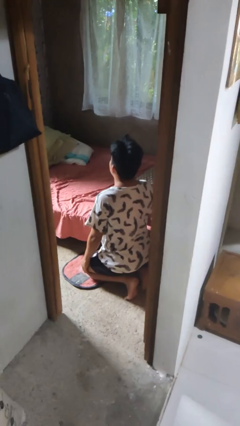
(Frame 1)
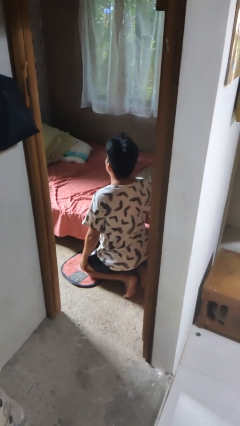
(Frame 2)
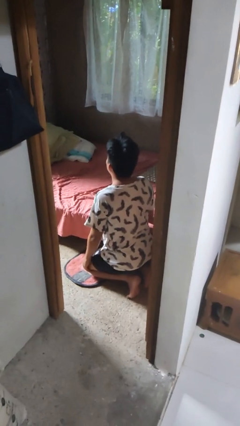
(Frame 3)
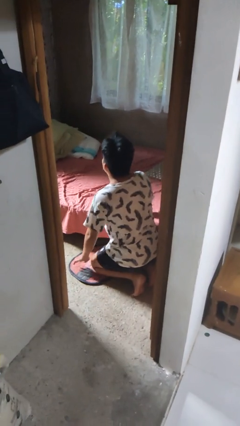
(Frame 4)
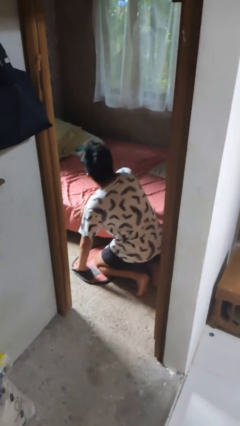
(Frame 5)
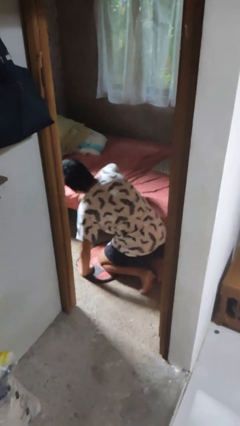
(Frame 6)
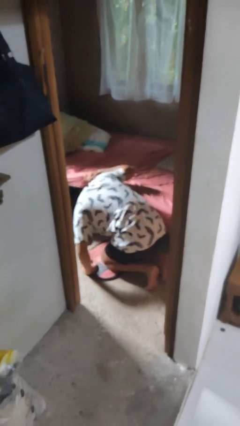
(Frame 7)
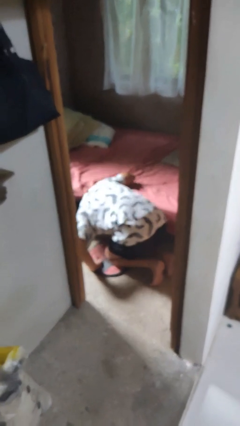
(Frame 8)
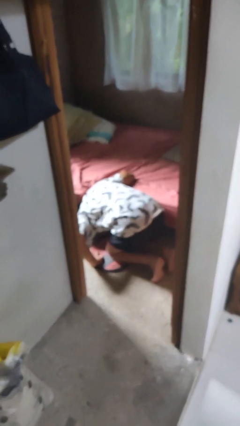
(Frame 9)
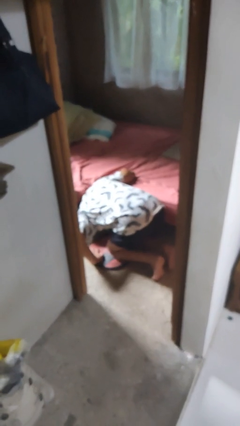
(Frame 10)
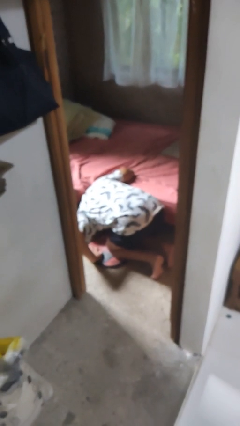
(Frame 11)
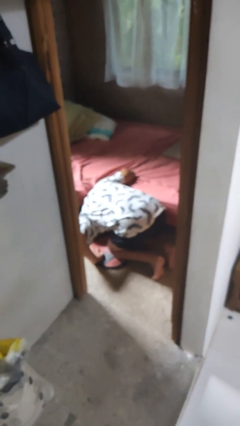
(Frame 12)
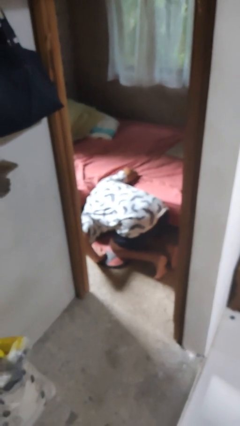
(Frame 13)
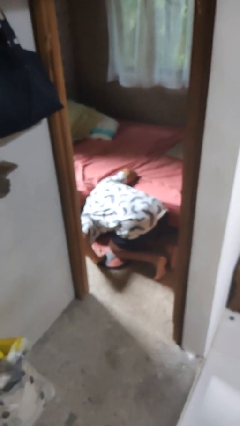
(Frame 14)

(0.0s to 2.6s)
person searches under bed

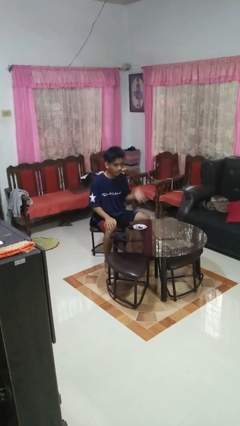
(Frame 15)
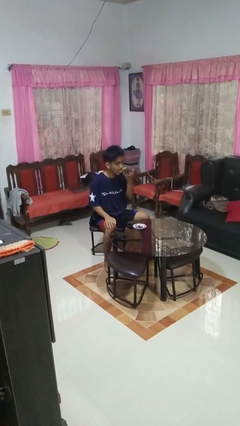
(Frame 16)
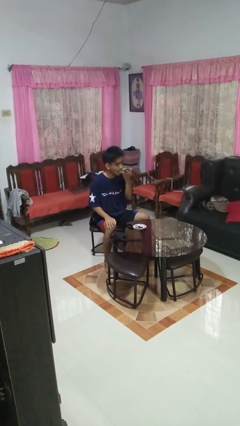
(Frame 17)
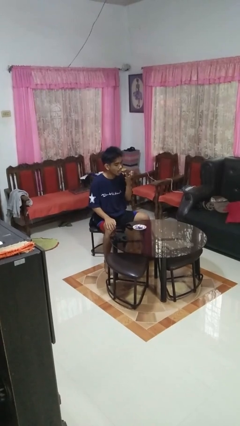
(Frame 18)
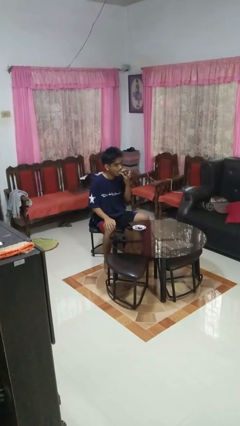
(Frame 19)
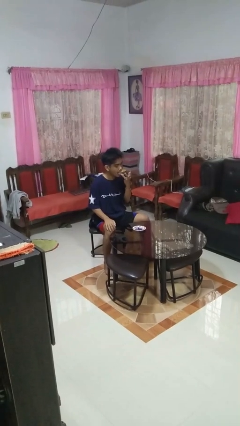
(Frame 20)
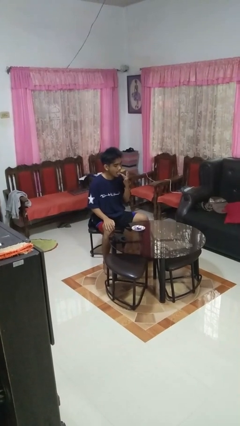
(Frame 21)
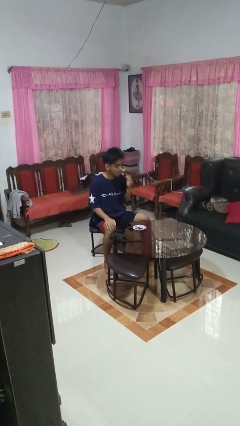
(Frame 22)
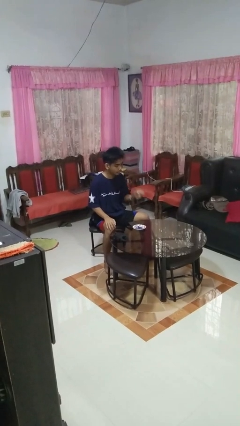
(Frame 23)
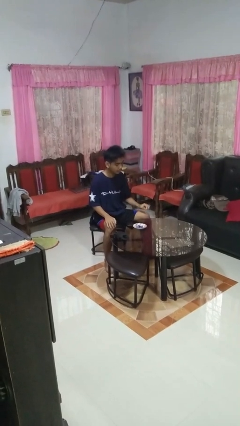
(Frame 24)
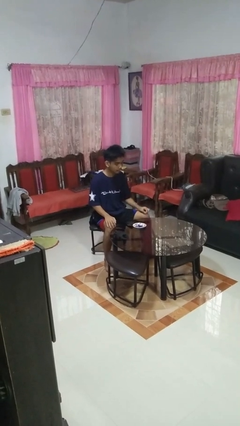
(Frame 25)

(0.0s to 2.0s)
person licks fingers

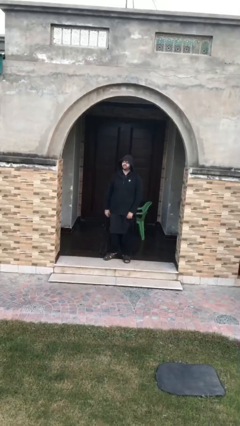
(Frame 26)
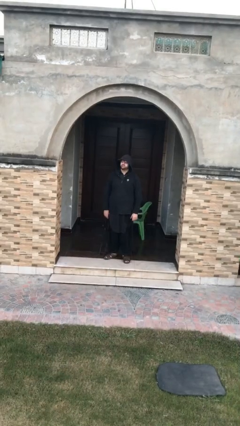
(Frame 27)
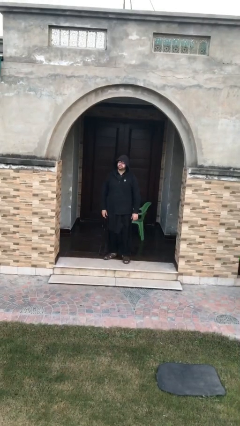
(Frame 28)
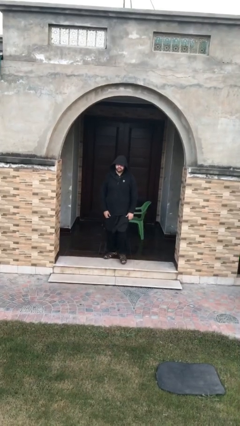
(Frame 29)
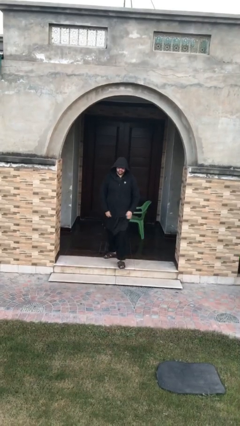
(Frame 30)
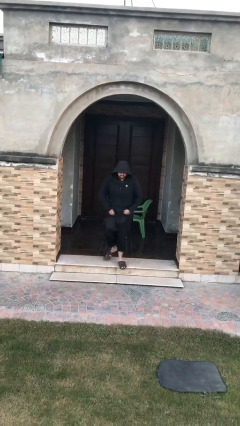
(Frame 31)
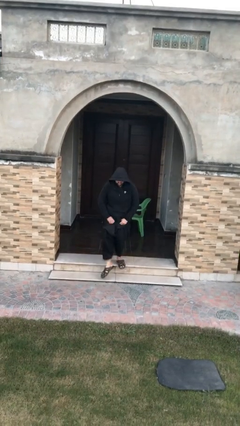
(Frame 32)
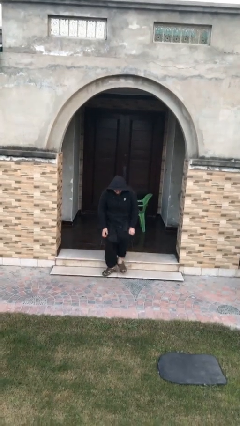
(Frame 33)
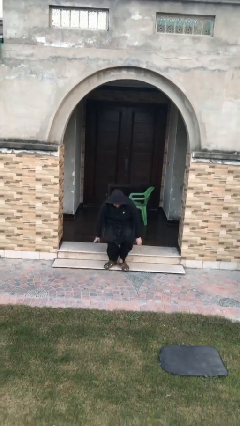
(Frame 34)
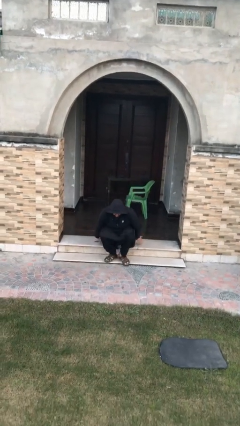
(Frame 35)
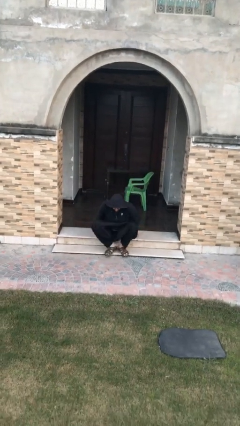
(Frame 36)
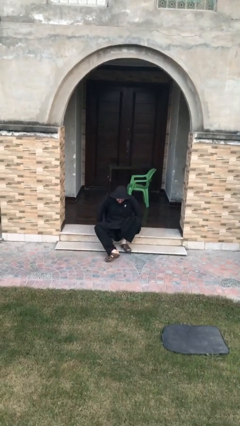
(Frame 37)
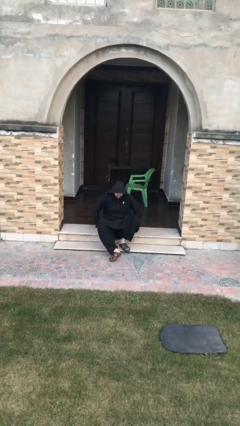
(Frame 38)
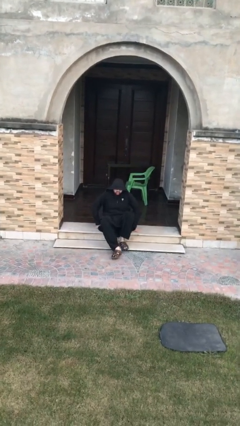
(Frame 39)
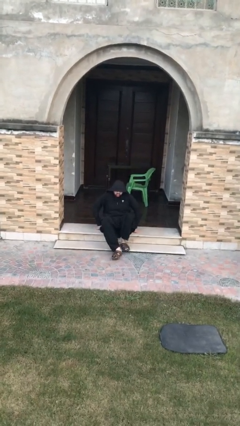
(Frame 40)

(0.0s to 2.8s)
person sits down

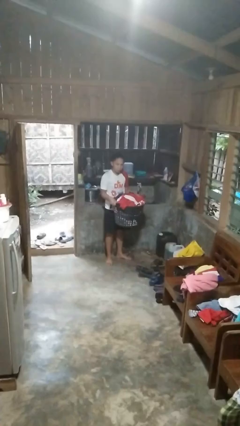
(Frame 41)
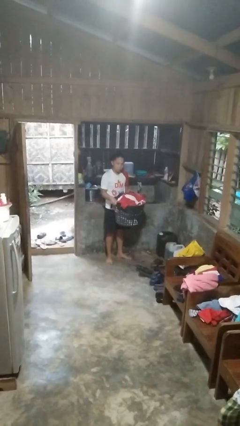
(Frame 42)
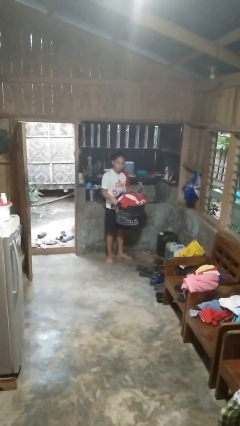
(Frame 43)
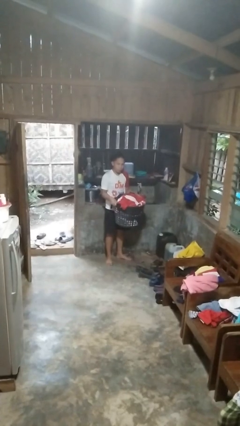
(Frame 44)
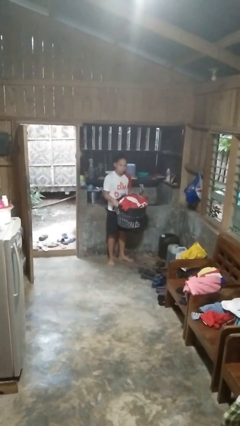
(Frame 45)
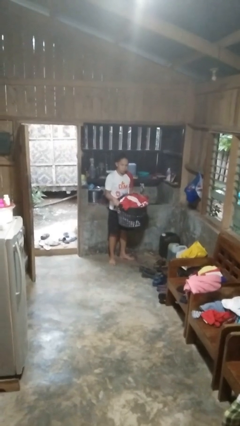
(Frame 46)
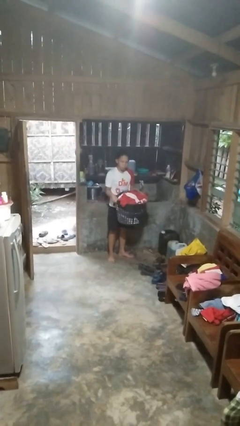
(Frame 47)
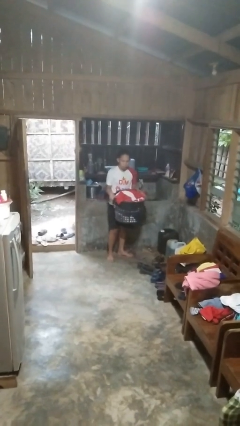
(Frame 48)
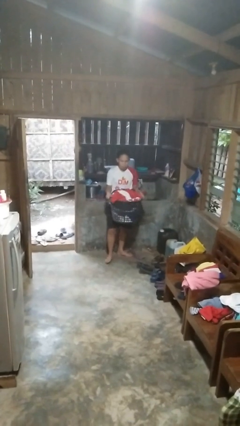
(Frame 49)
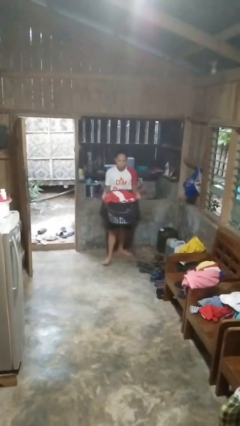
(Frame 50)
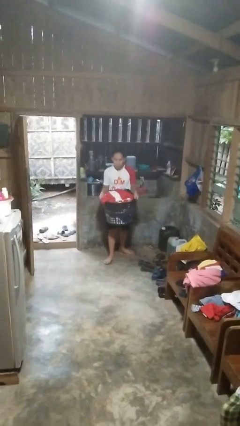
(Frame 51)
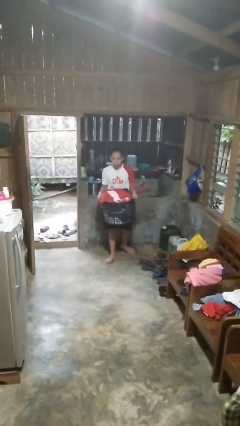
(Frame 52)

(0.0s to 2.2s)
person carries laundry basket

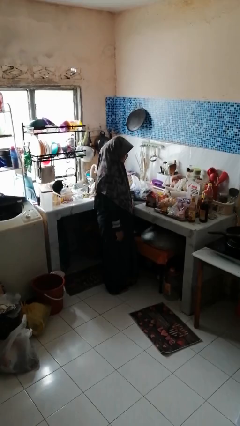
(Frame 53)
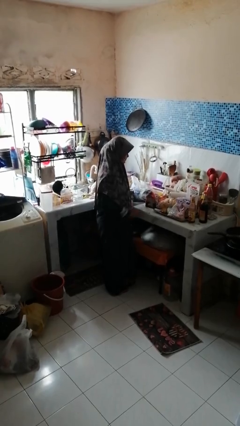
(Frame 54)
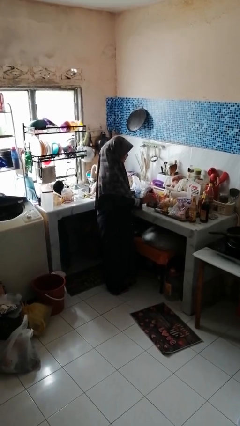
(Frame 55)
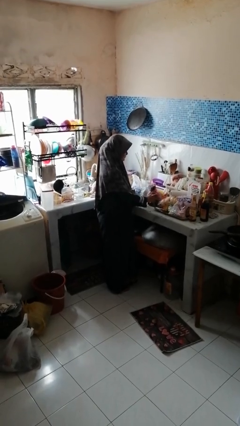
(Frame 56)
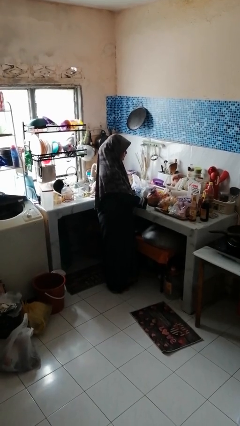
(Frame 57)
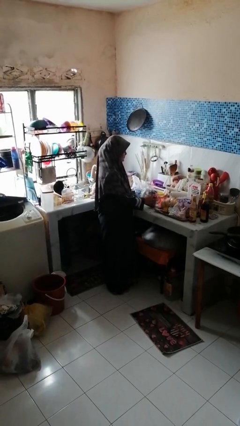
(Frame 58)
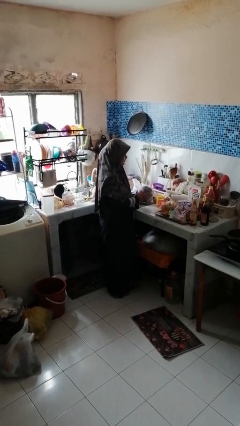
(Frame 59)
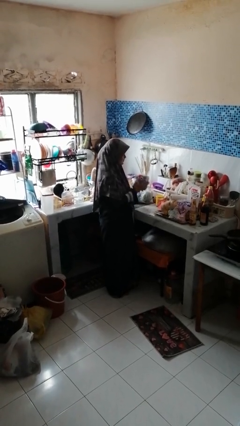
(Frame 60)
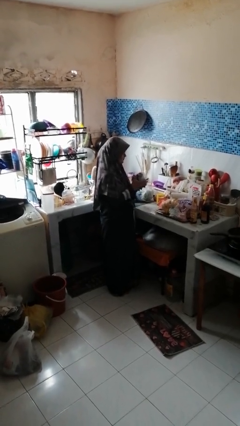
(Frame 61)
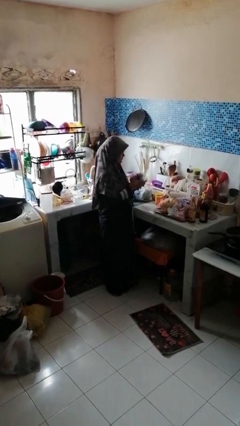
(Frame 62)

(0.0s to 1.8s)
person picks up object from countertop

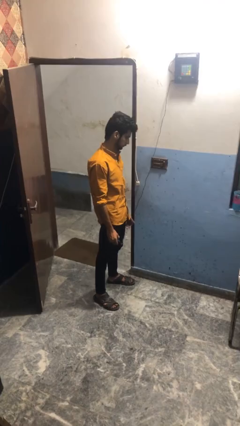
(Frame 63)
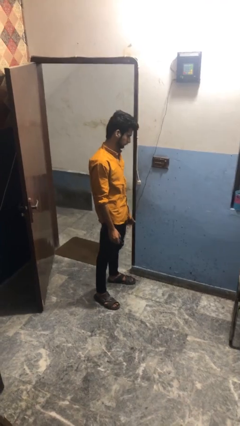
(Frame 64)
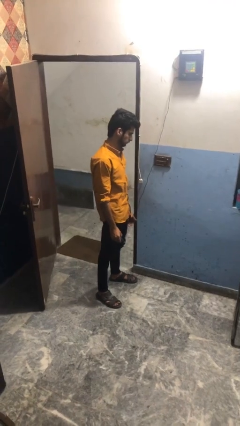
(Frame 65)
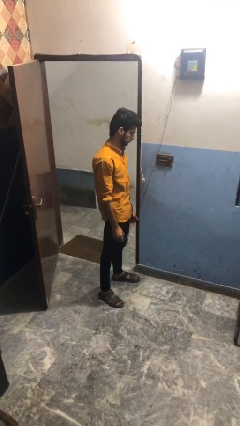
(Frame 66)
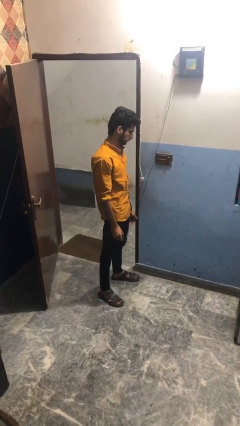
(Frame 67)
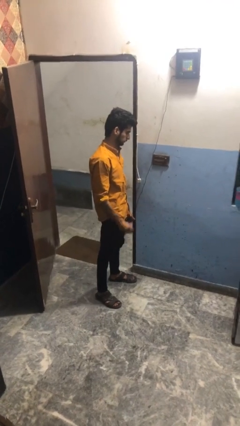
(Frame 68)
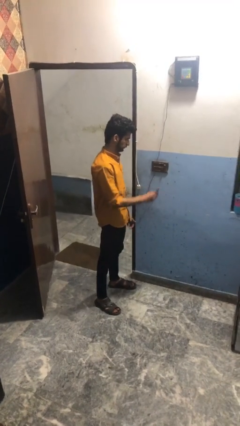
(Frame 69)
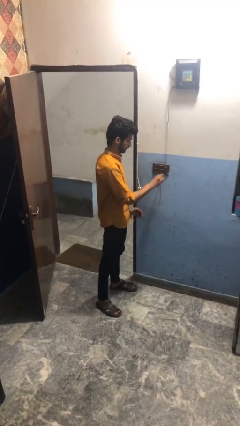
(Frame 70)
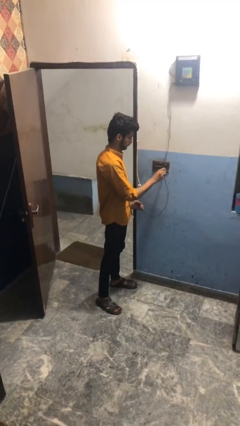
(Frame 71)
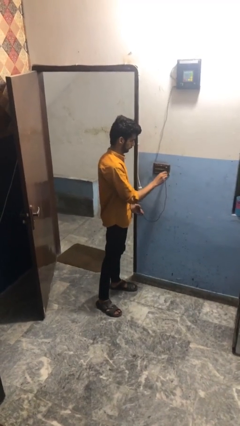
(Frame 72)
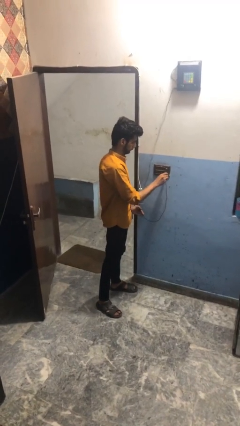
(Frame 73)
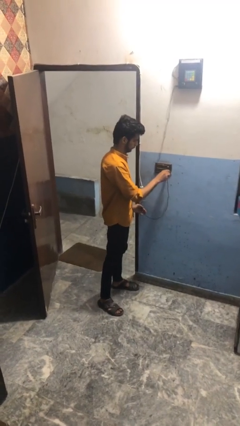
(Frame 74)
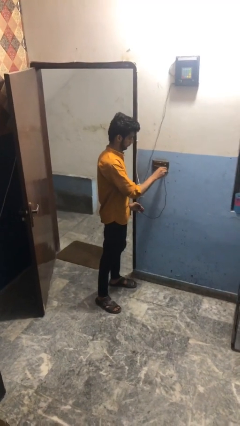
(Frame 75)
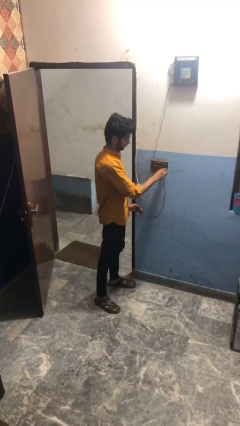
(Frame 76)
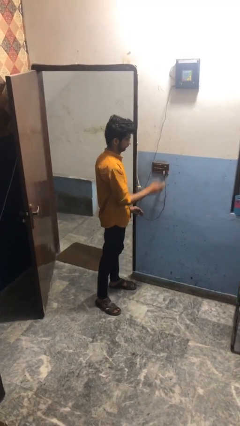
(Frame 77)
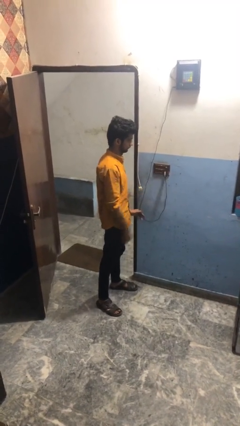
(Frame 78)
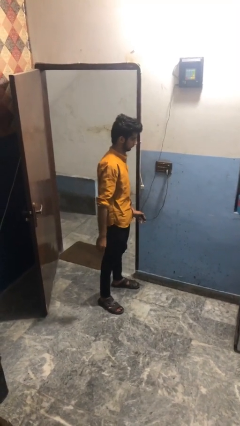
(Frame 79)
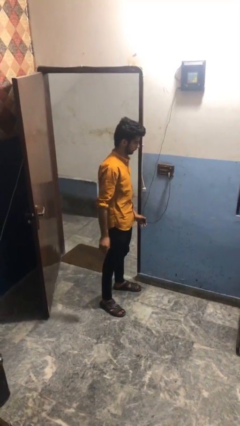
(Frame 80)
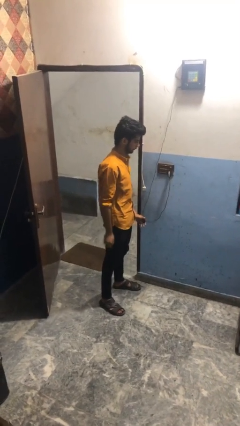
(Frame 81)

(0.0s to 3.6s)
person plugs into electrical socket

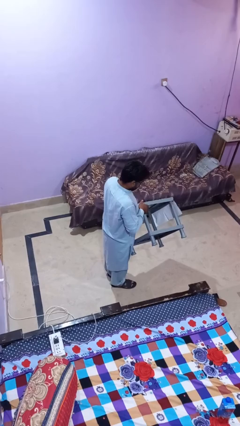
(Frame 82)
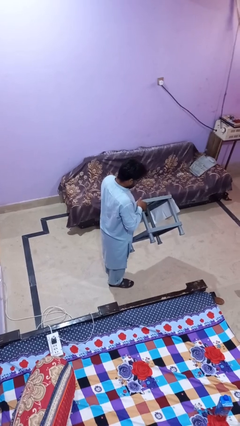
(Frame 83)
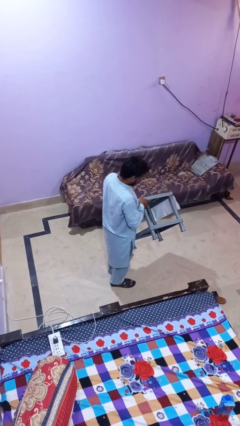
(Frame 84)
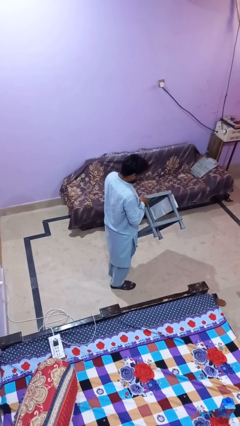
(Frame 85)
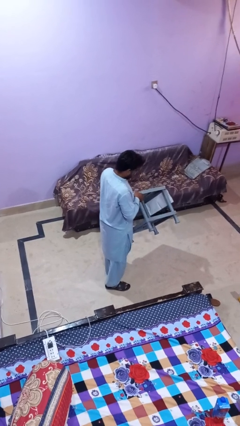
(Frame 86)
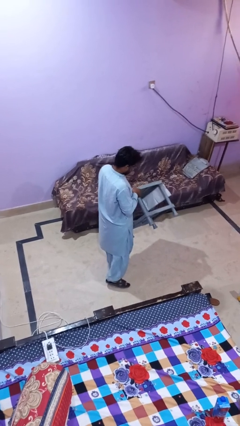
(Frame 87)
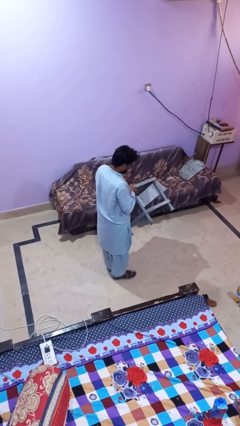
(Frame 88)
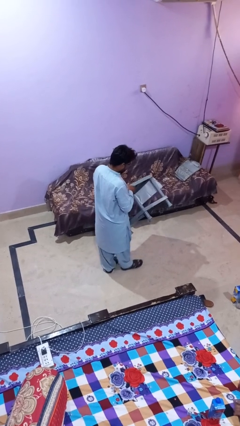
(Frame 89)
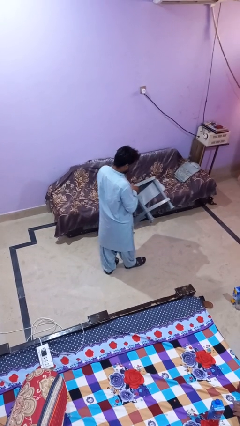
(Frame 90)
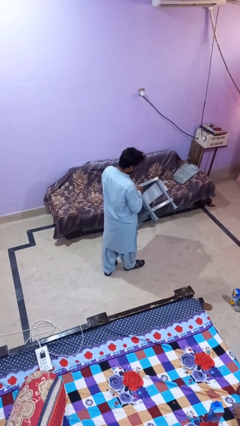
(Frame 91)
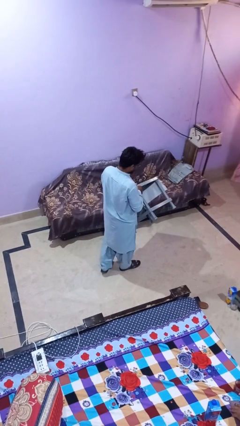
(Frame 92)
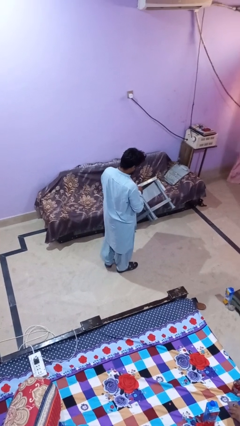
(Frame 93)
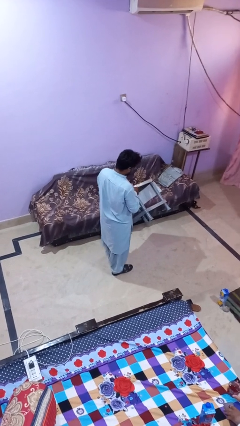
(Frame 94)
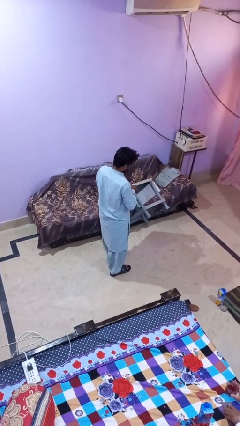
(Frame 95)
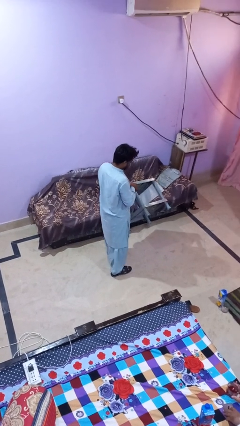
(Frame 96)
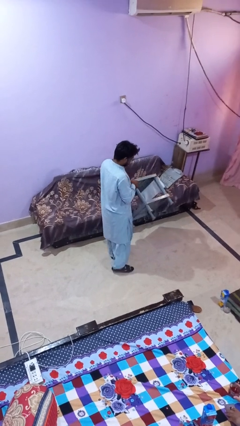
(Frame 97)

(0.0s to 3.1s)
person carries furniture
